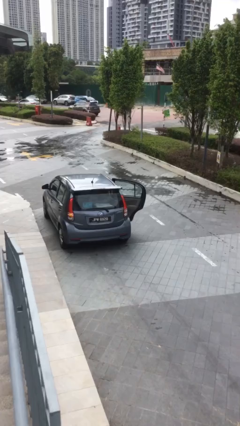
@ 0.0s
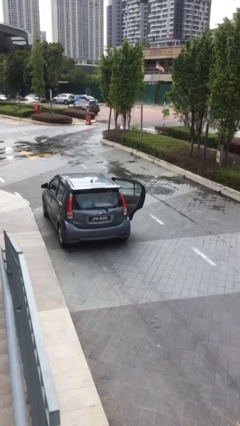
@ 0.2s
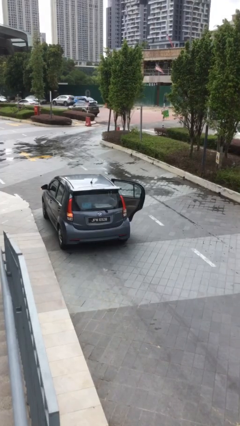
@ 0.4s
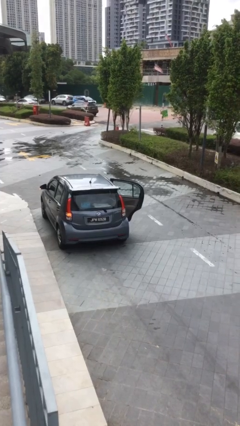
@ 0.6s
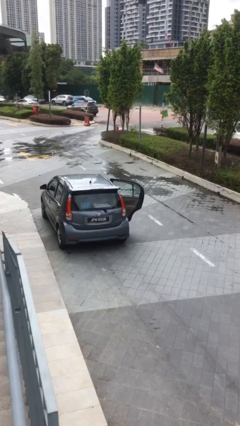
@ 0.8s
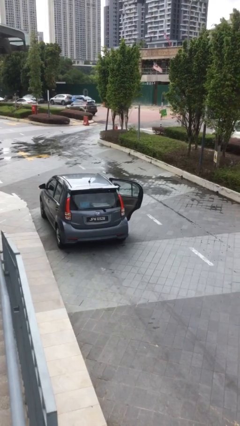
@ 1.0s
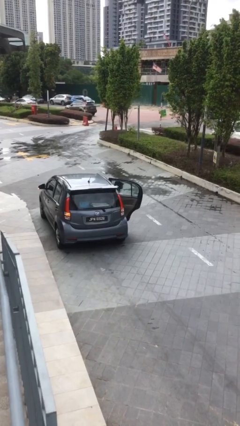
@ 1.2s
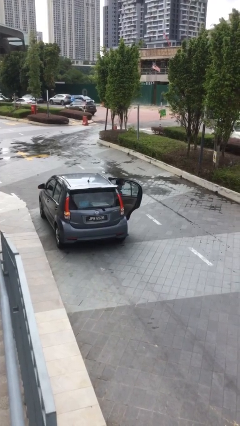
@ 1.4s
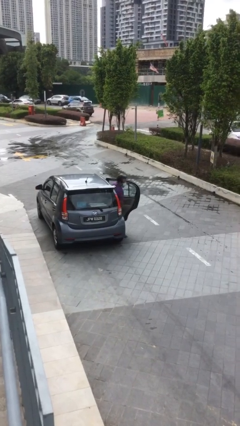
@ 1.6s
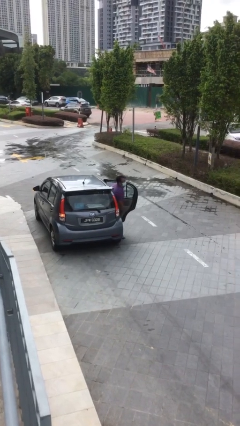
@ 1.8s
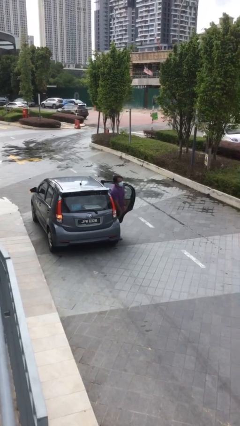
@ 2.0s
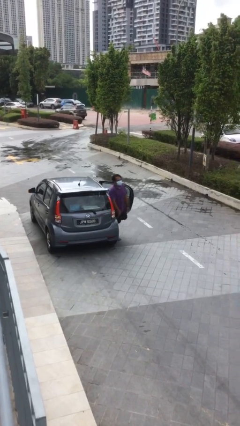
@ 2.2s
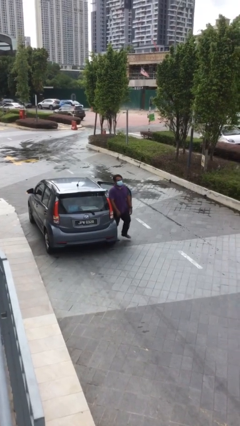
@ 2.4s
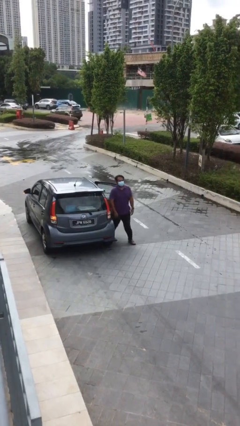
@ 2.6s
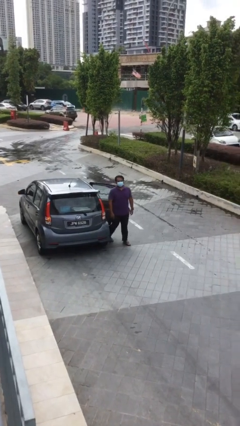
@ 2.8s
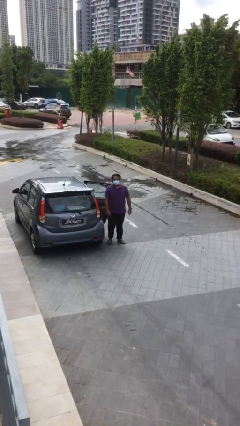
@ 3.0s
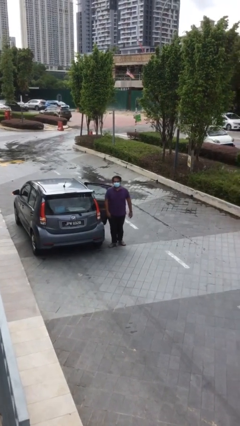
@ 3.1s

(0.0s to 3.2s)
person exits car

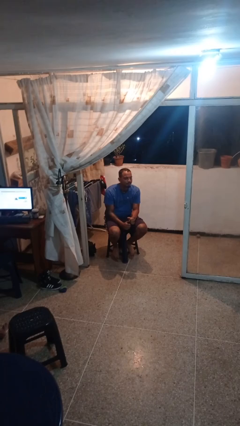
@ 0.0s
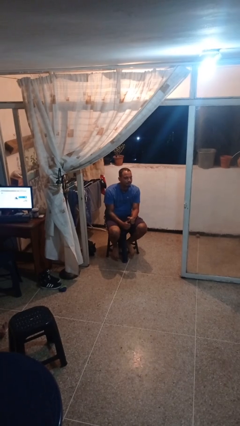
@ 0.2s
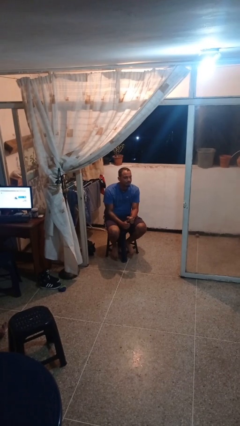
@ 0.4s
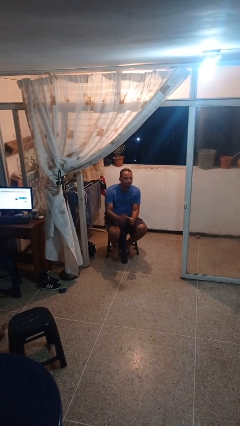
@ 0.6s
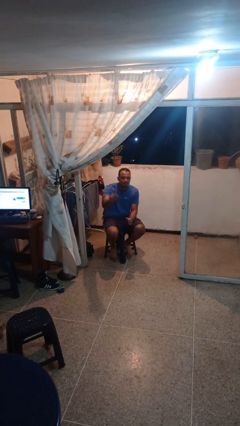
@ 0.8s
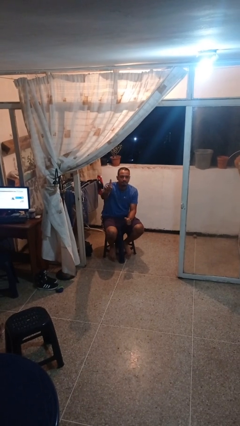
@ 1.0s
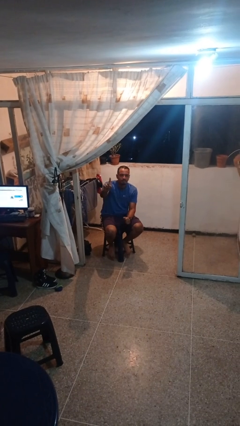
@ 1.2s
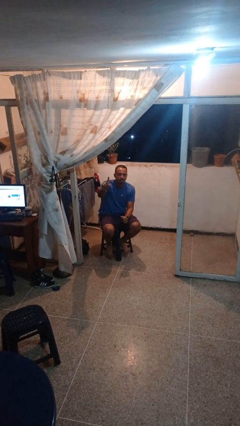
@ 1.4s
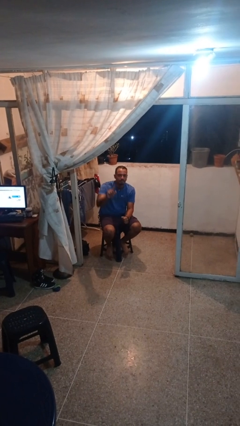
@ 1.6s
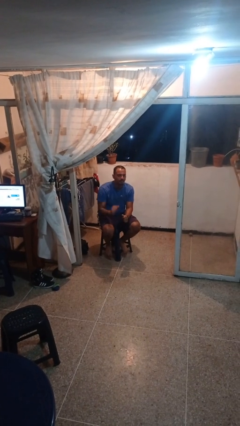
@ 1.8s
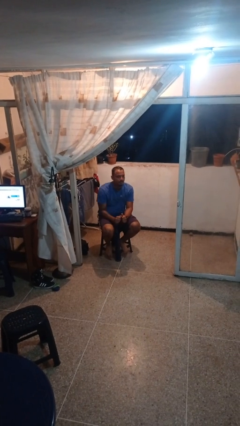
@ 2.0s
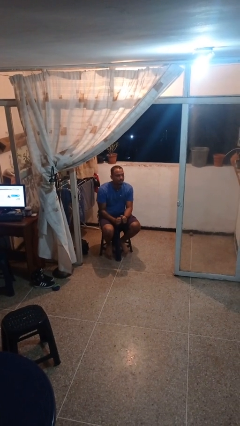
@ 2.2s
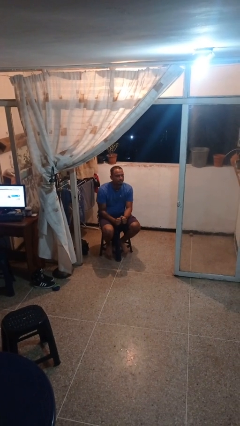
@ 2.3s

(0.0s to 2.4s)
person gestures number one

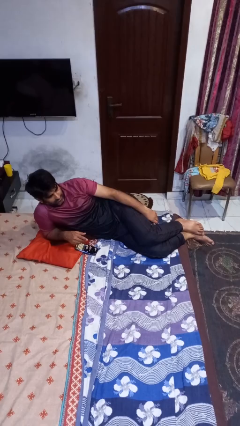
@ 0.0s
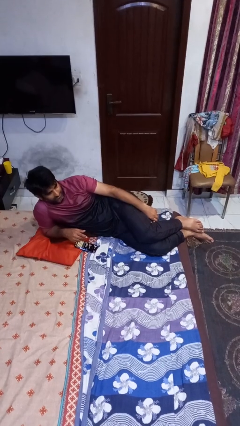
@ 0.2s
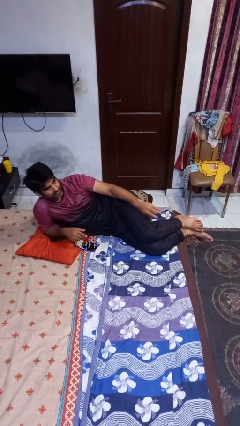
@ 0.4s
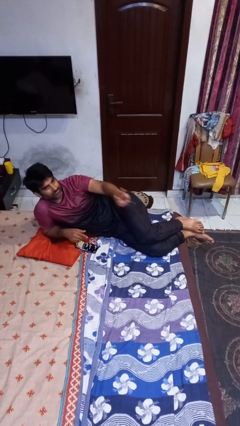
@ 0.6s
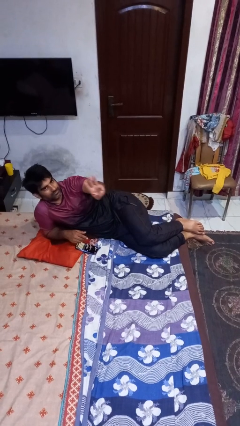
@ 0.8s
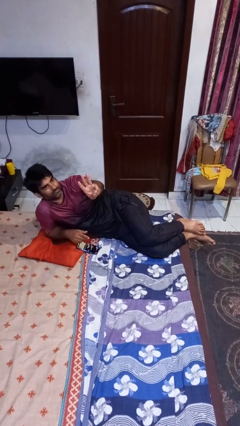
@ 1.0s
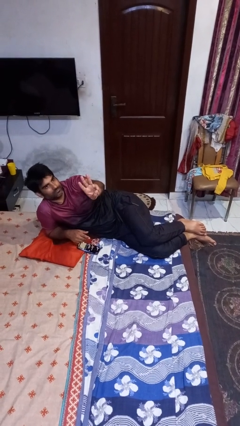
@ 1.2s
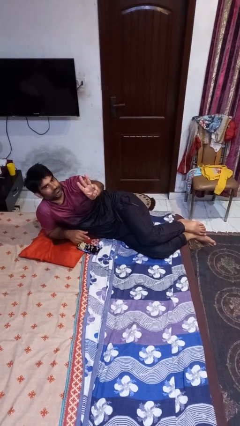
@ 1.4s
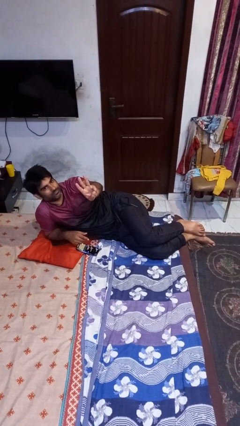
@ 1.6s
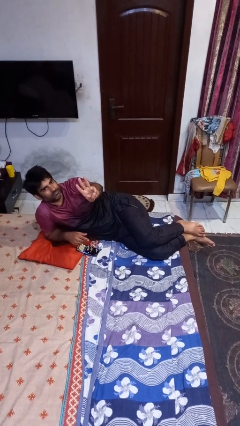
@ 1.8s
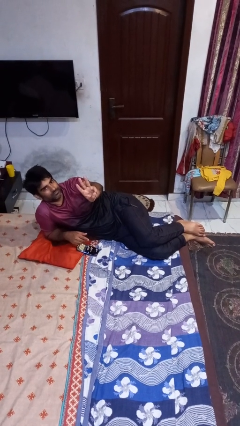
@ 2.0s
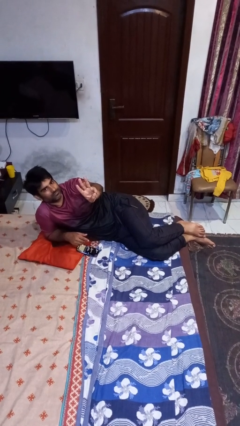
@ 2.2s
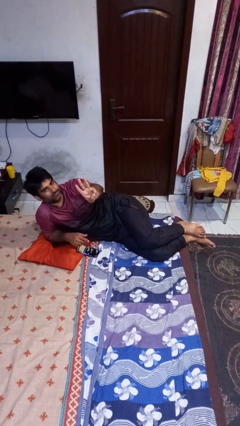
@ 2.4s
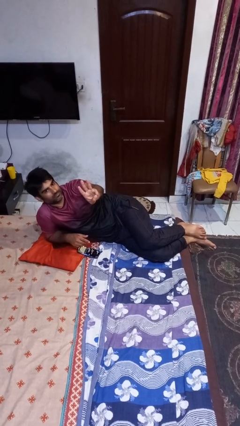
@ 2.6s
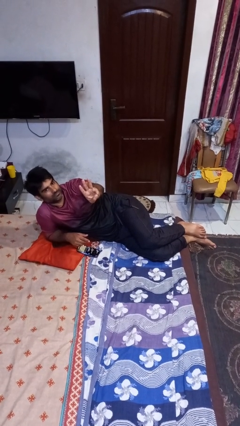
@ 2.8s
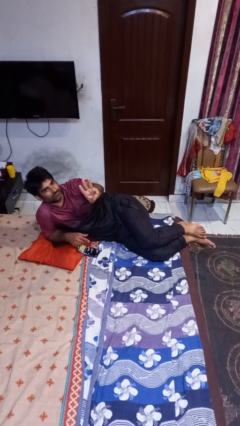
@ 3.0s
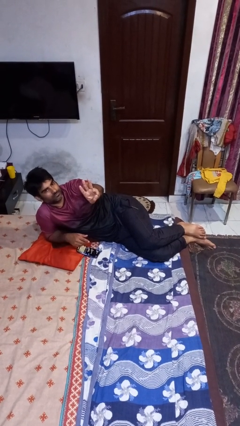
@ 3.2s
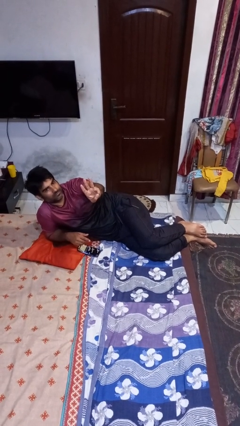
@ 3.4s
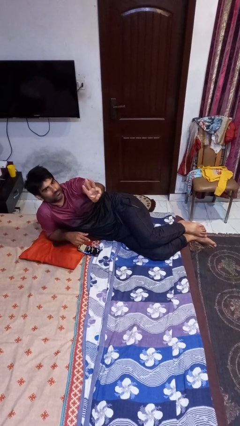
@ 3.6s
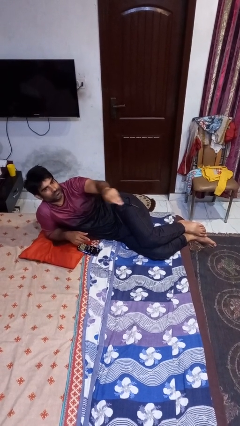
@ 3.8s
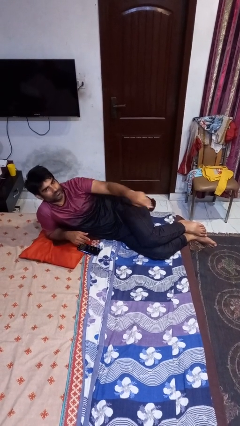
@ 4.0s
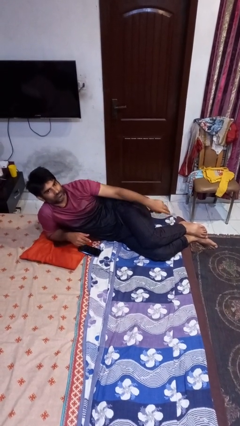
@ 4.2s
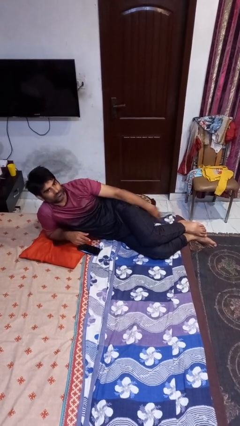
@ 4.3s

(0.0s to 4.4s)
person gestures number three

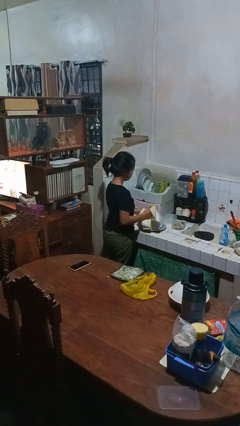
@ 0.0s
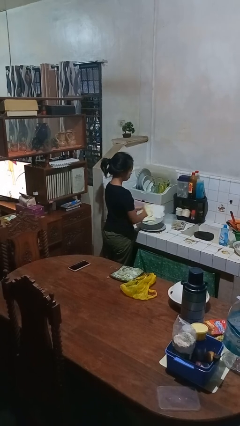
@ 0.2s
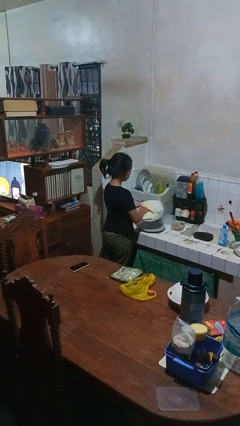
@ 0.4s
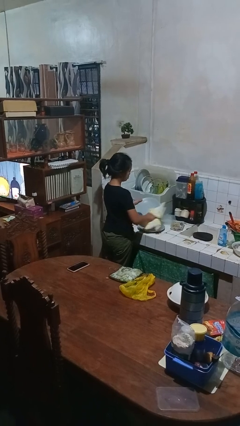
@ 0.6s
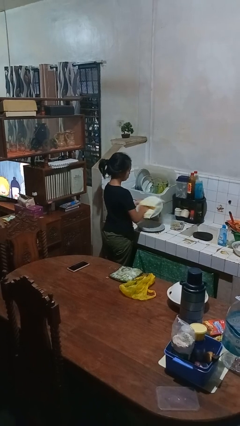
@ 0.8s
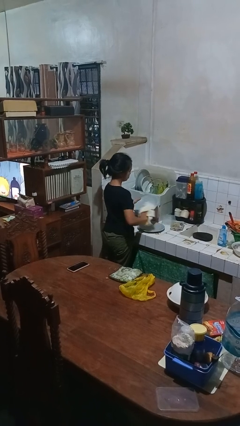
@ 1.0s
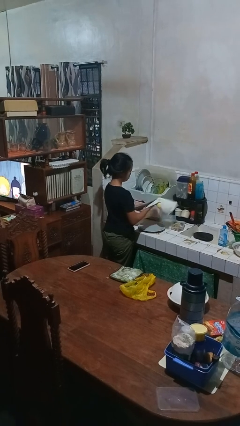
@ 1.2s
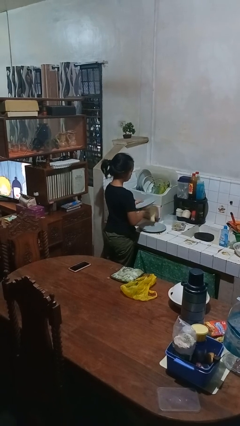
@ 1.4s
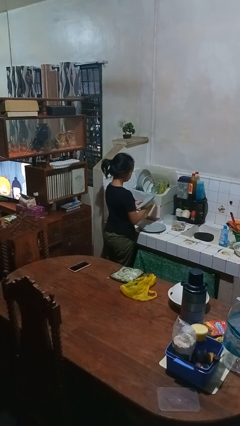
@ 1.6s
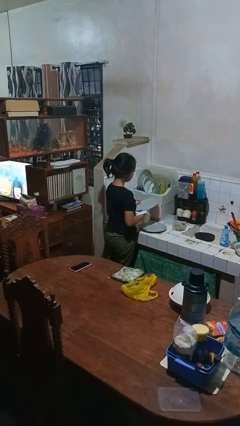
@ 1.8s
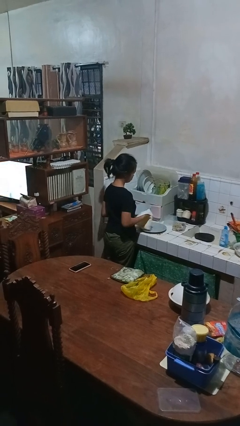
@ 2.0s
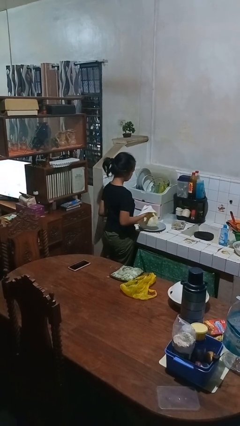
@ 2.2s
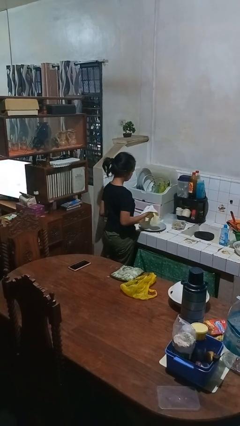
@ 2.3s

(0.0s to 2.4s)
person dries dish

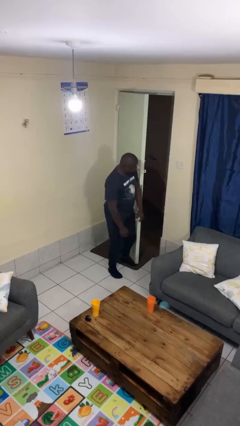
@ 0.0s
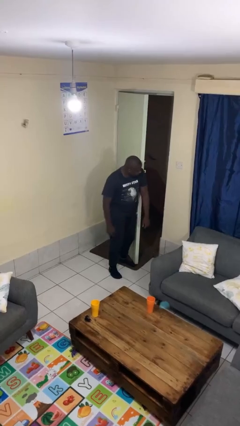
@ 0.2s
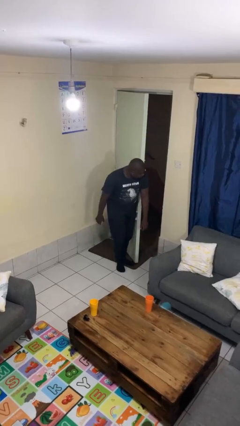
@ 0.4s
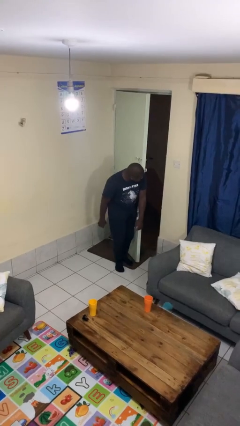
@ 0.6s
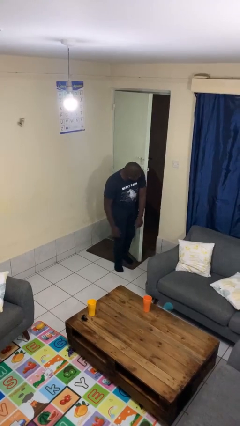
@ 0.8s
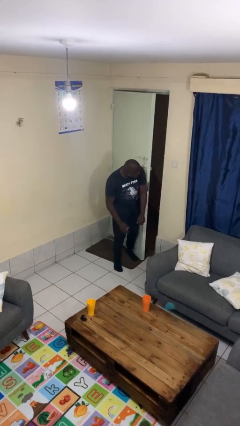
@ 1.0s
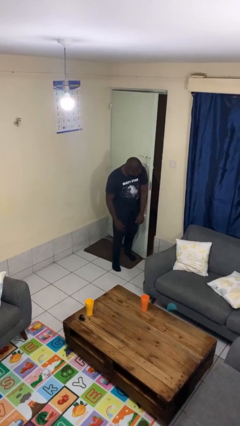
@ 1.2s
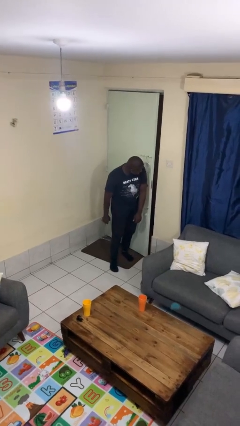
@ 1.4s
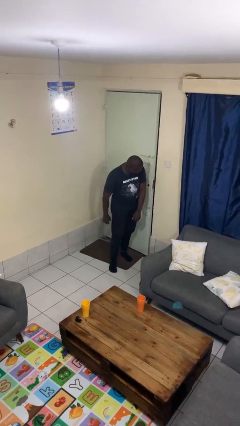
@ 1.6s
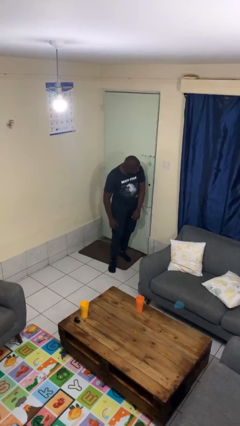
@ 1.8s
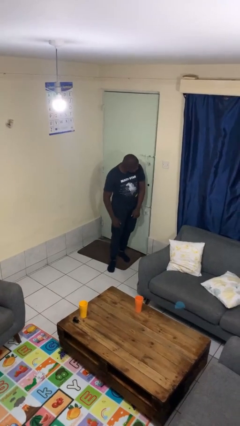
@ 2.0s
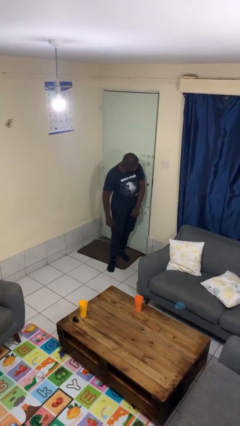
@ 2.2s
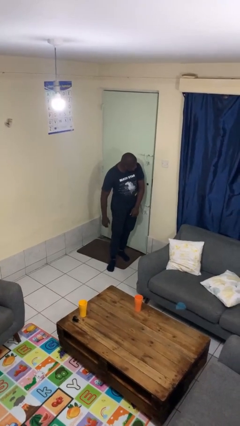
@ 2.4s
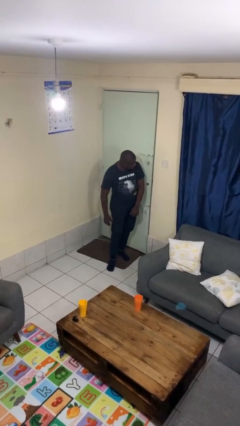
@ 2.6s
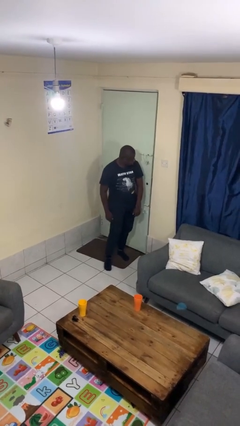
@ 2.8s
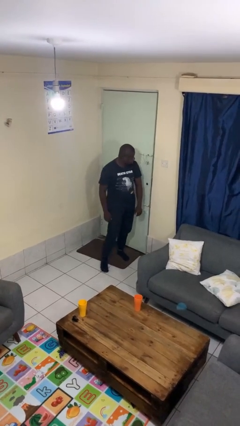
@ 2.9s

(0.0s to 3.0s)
person closes door with hip

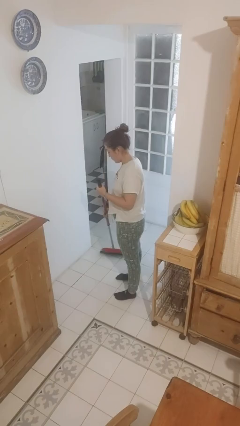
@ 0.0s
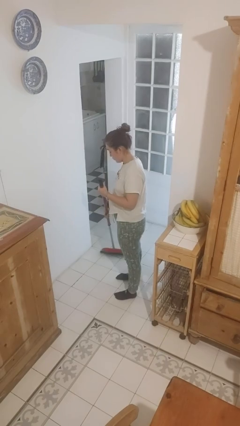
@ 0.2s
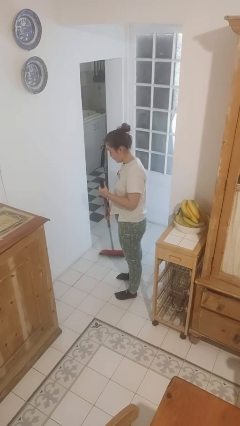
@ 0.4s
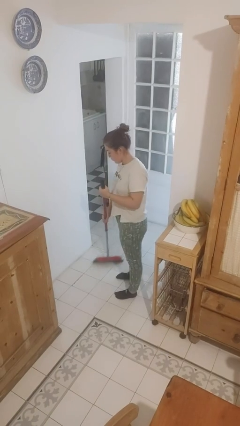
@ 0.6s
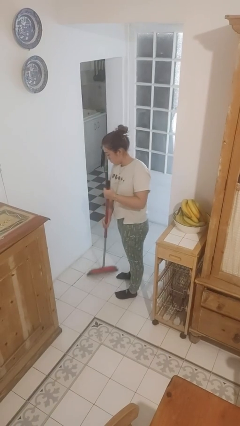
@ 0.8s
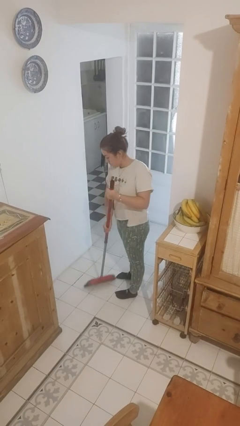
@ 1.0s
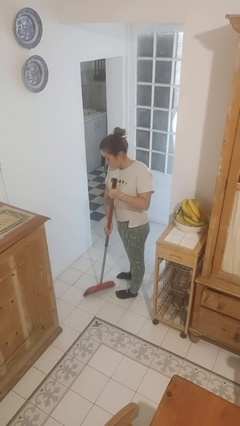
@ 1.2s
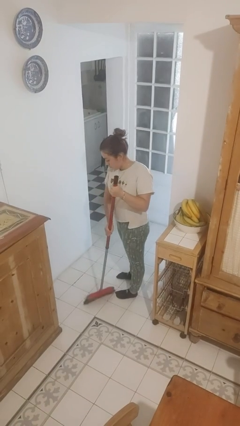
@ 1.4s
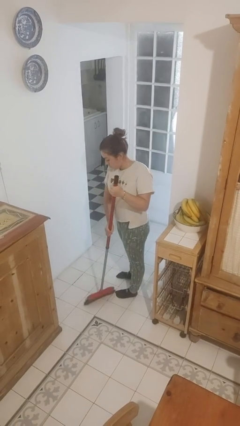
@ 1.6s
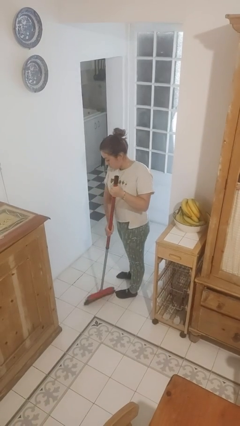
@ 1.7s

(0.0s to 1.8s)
person sweeps floor

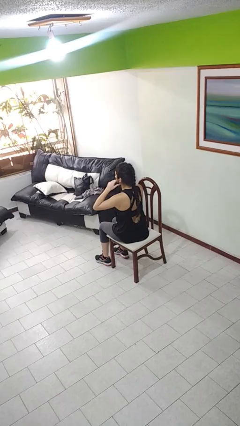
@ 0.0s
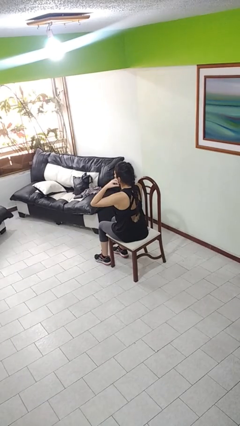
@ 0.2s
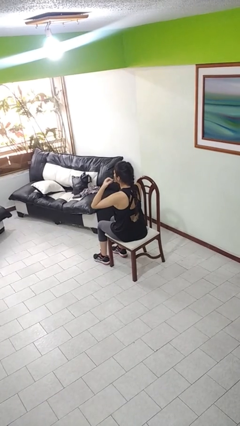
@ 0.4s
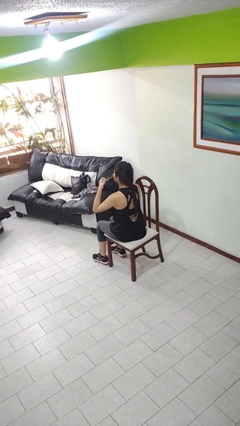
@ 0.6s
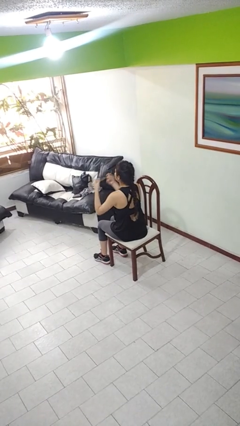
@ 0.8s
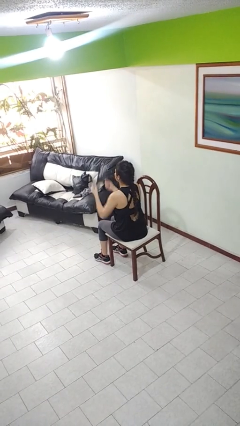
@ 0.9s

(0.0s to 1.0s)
person takes off facemask
